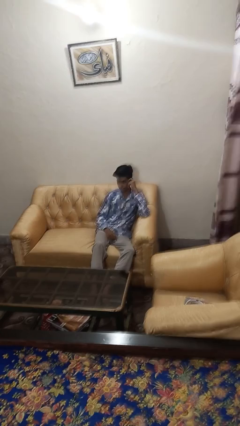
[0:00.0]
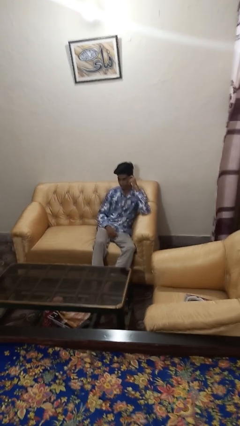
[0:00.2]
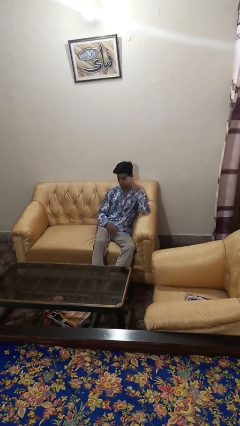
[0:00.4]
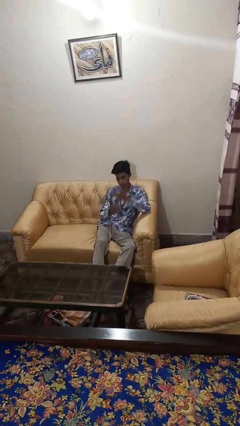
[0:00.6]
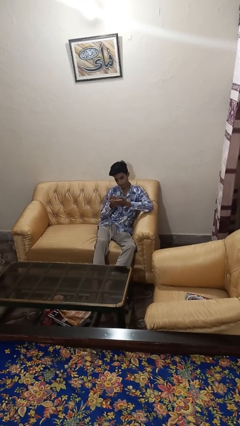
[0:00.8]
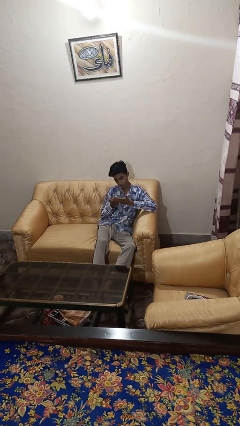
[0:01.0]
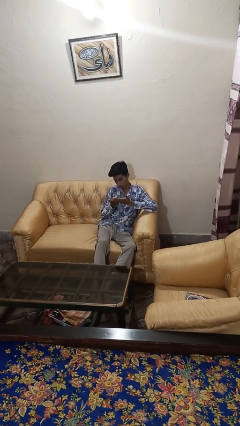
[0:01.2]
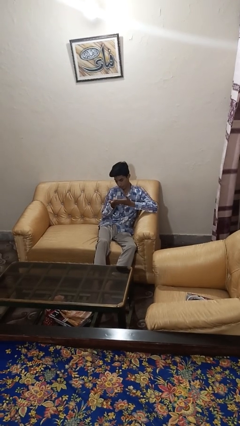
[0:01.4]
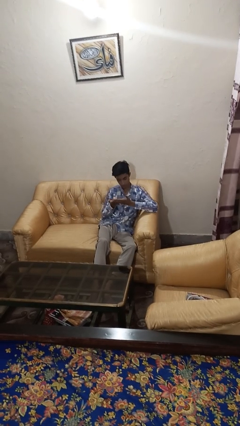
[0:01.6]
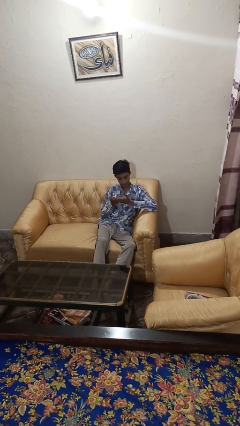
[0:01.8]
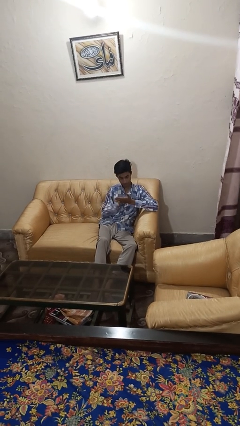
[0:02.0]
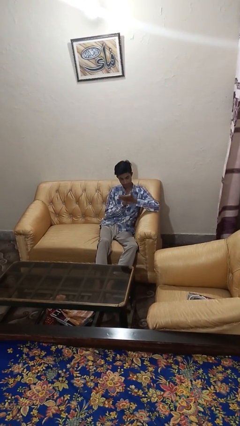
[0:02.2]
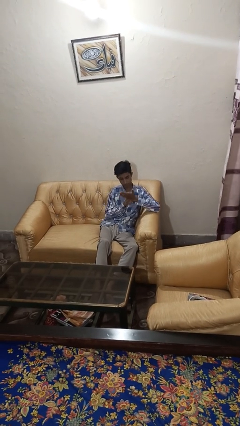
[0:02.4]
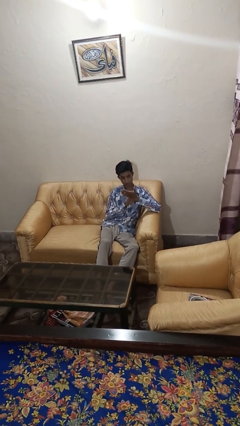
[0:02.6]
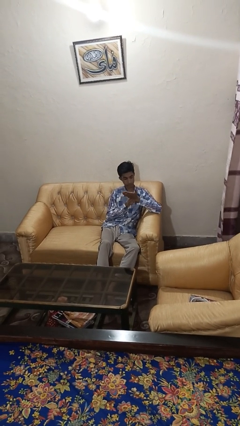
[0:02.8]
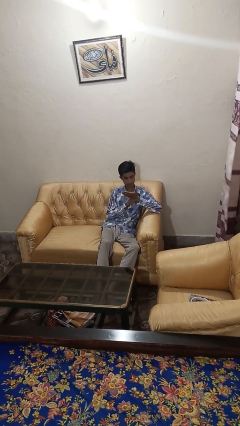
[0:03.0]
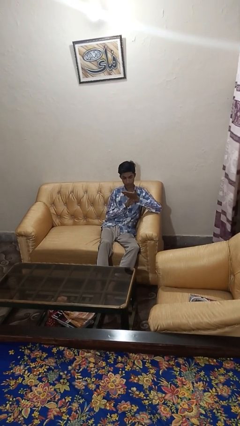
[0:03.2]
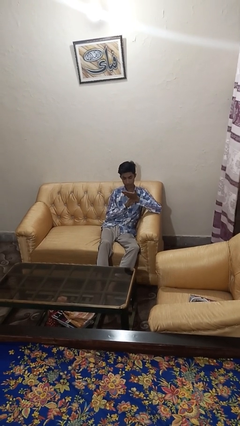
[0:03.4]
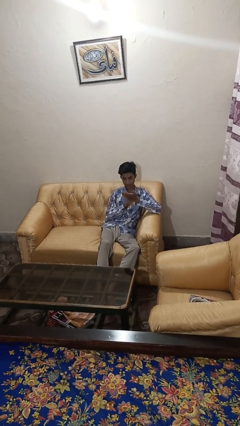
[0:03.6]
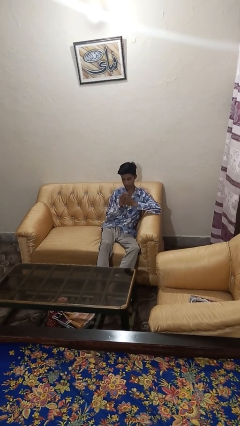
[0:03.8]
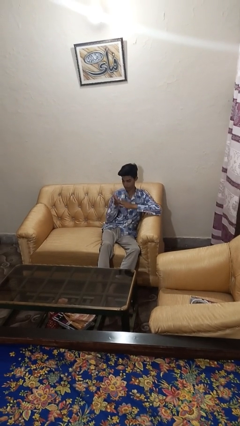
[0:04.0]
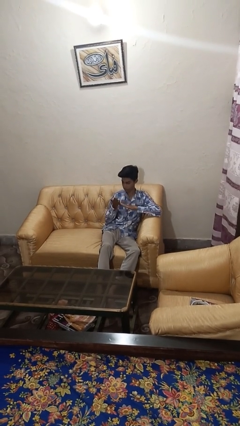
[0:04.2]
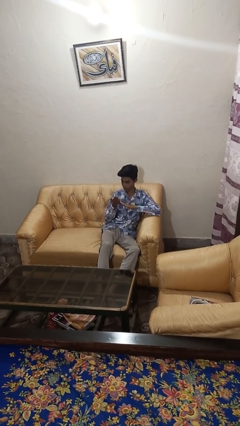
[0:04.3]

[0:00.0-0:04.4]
person looks at hands in lap

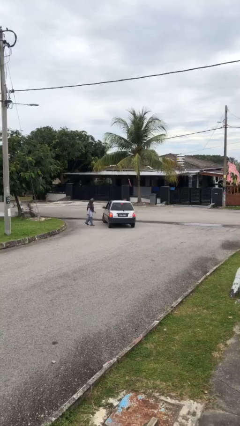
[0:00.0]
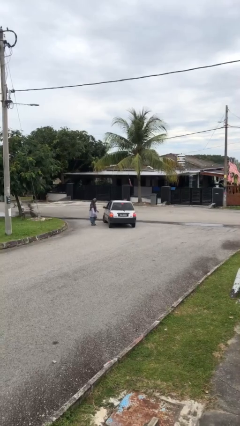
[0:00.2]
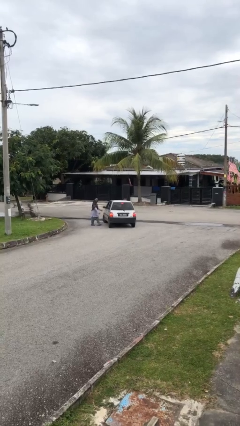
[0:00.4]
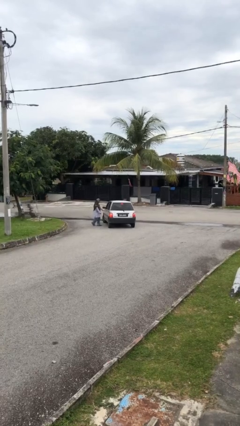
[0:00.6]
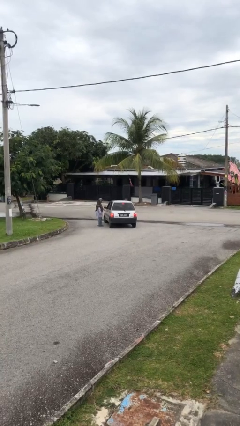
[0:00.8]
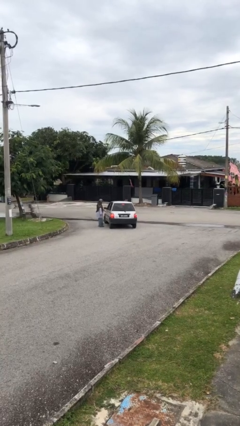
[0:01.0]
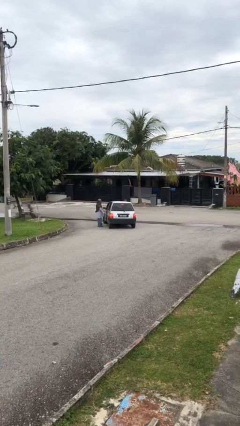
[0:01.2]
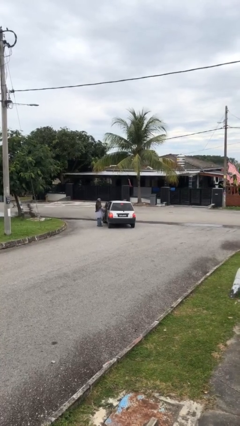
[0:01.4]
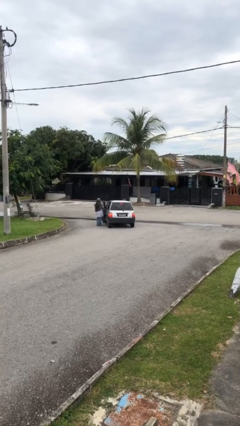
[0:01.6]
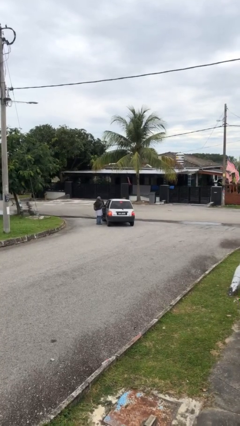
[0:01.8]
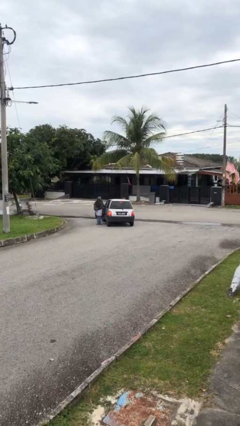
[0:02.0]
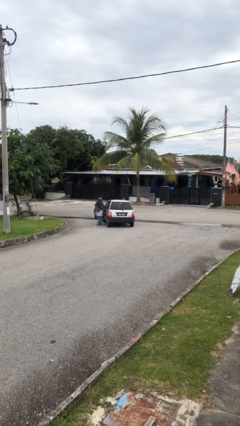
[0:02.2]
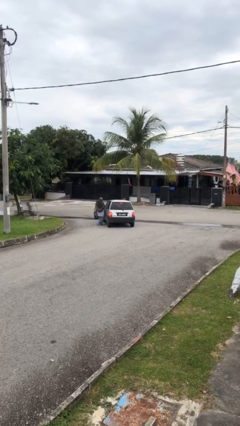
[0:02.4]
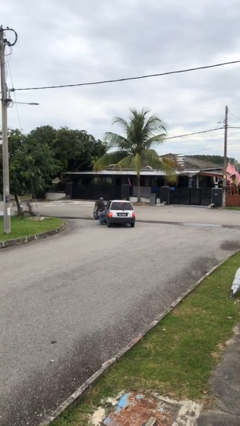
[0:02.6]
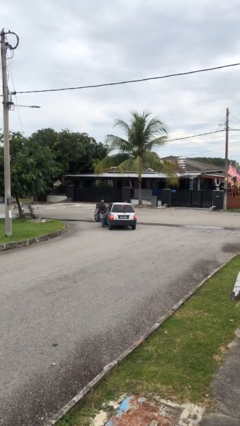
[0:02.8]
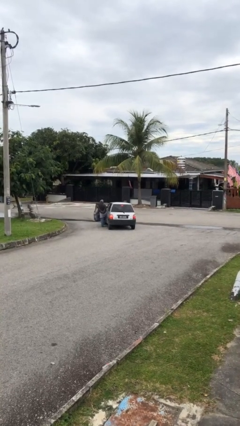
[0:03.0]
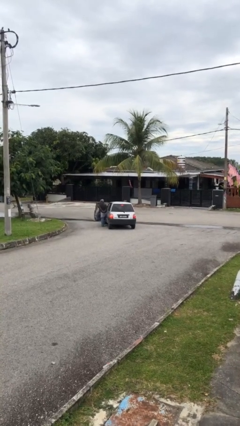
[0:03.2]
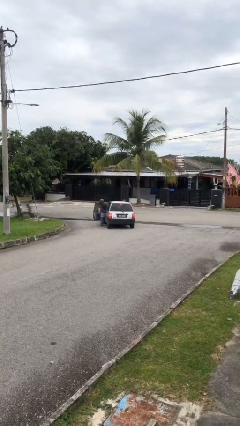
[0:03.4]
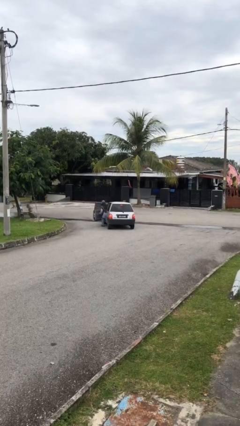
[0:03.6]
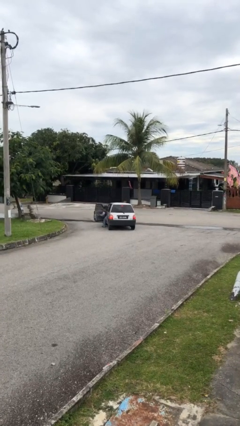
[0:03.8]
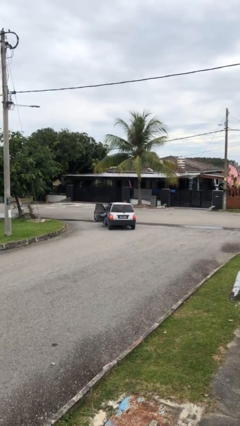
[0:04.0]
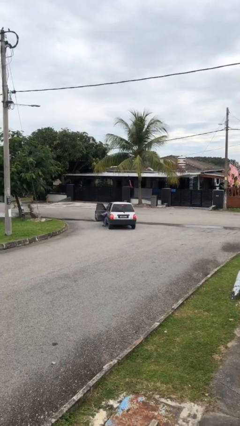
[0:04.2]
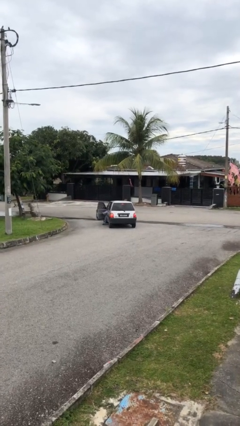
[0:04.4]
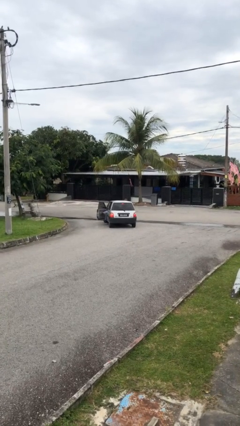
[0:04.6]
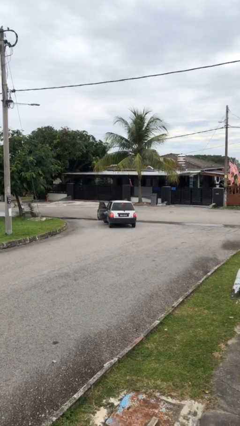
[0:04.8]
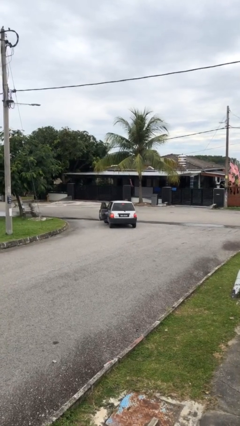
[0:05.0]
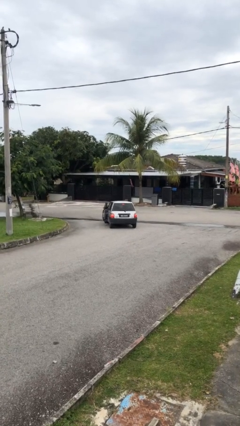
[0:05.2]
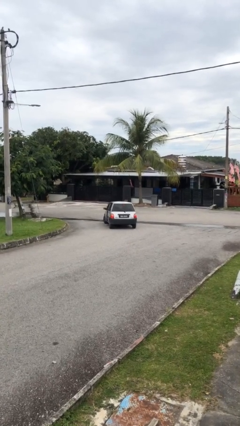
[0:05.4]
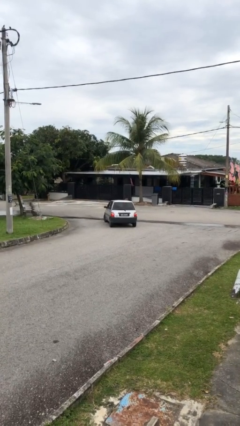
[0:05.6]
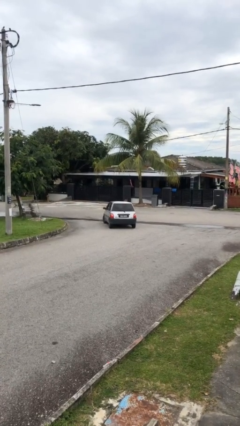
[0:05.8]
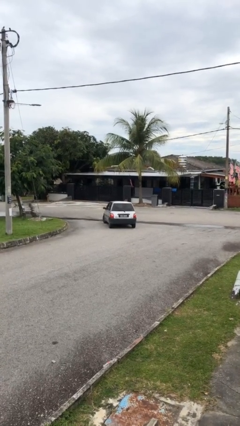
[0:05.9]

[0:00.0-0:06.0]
car picks up person

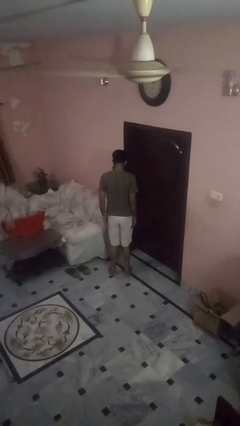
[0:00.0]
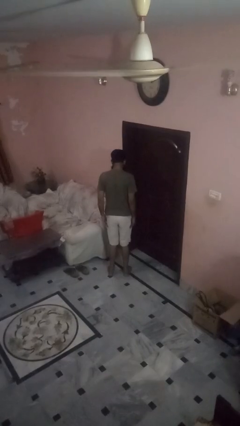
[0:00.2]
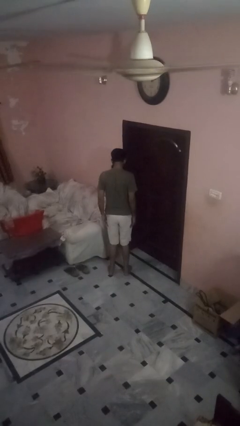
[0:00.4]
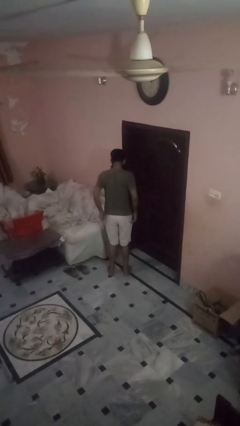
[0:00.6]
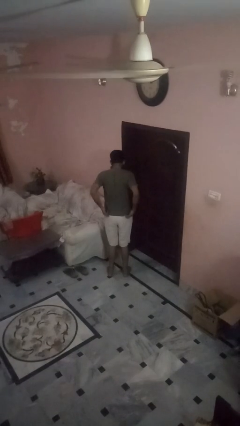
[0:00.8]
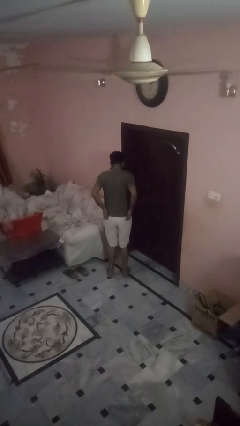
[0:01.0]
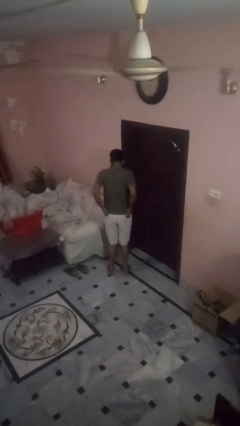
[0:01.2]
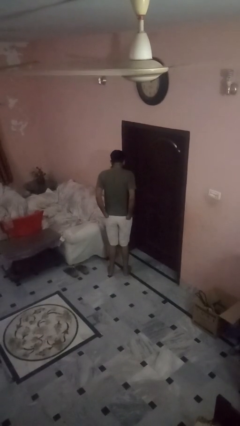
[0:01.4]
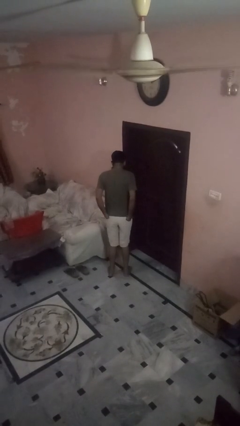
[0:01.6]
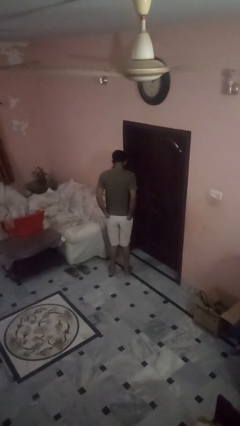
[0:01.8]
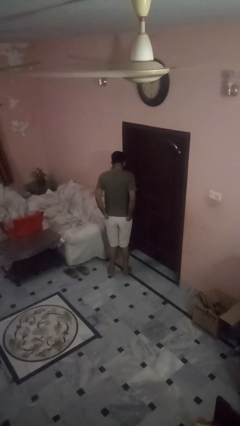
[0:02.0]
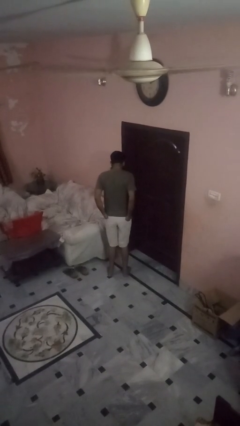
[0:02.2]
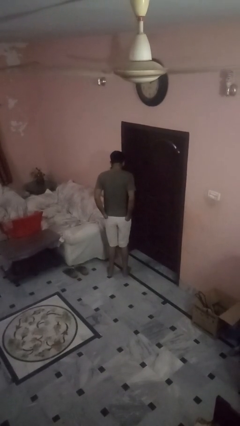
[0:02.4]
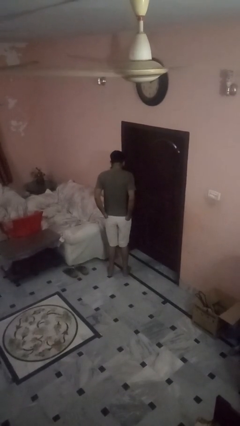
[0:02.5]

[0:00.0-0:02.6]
person puts hands in back pockets

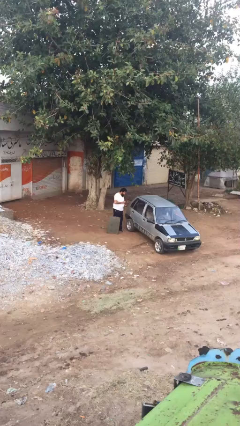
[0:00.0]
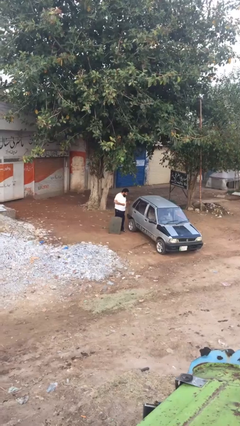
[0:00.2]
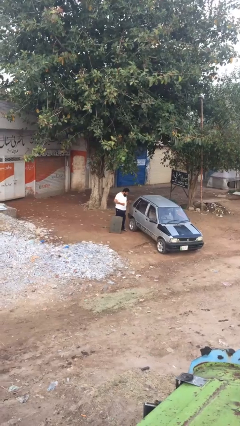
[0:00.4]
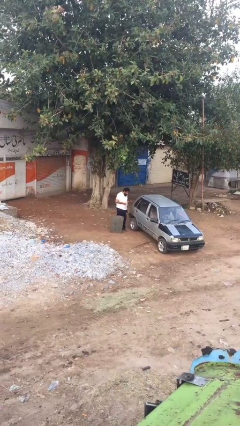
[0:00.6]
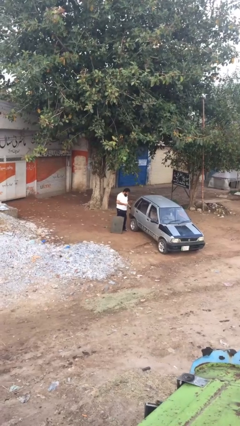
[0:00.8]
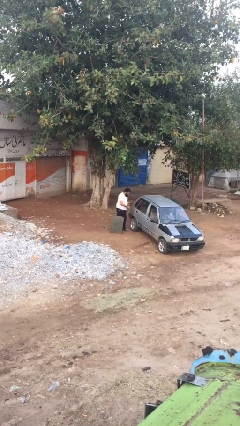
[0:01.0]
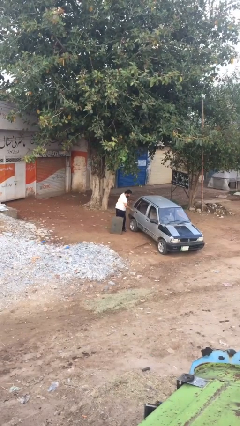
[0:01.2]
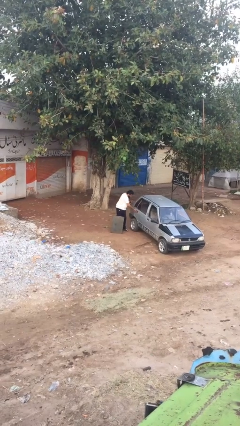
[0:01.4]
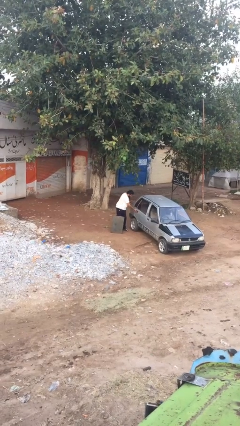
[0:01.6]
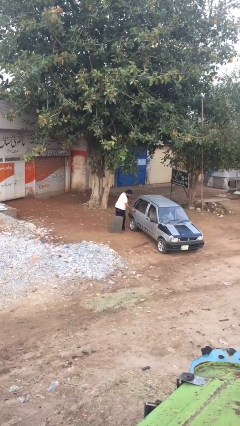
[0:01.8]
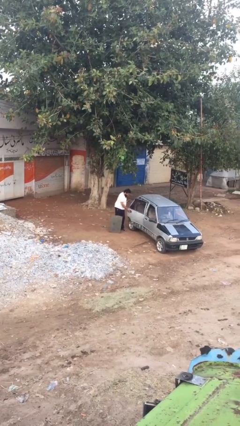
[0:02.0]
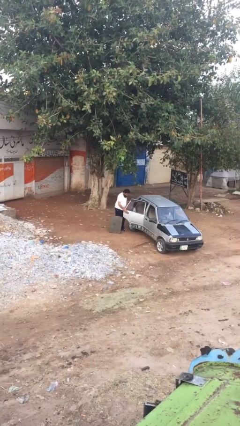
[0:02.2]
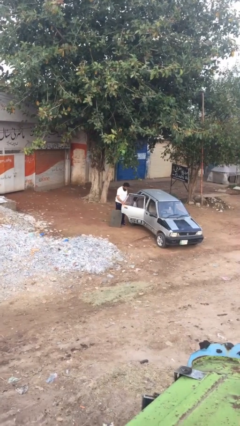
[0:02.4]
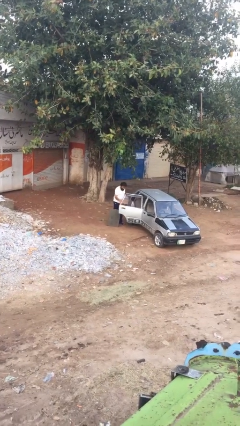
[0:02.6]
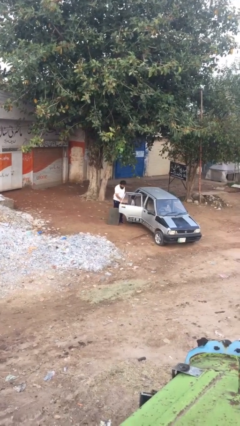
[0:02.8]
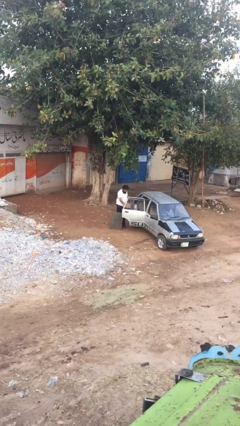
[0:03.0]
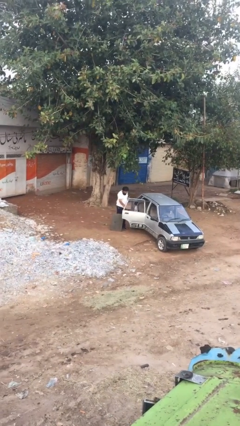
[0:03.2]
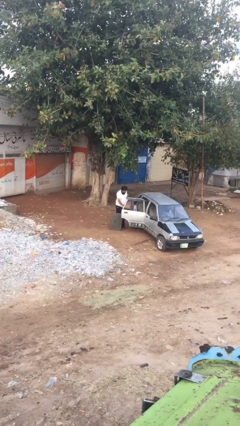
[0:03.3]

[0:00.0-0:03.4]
person opens car door

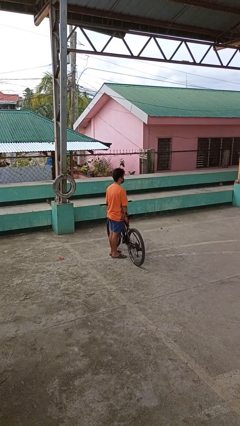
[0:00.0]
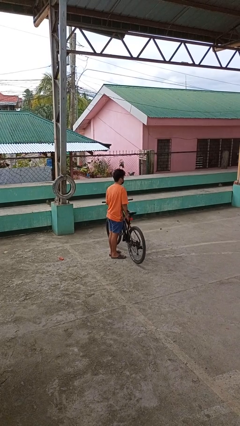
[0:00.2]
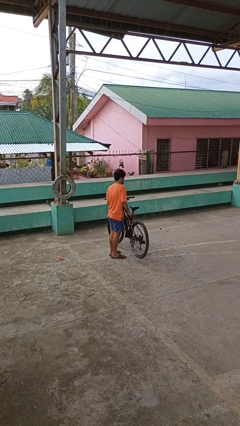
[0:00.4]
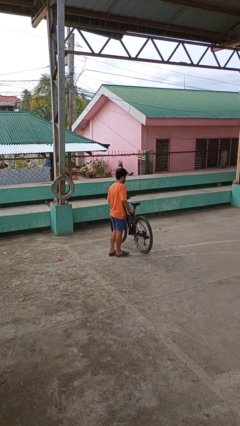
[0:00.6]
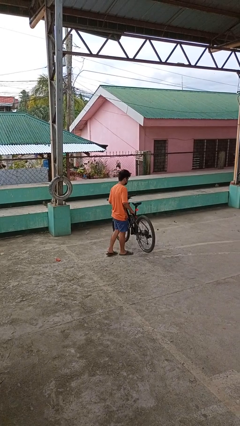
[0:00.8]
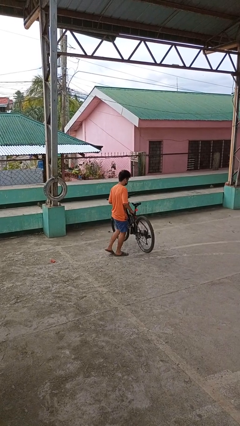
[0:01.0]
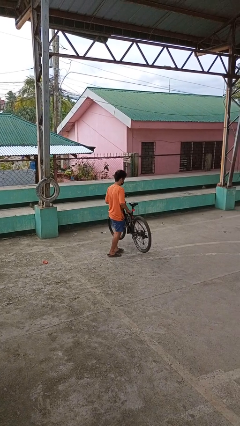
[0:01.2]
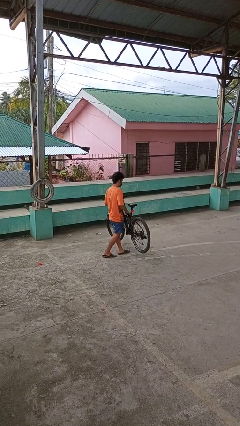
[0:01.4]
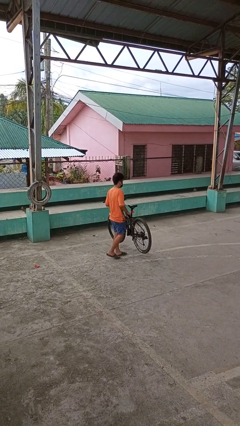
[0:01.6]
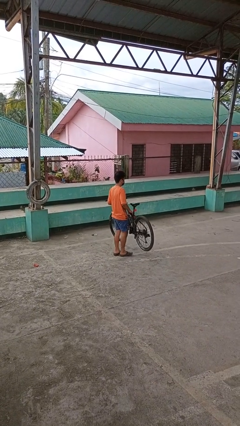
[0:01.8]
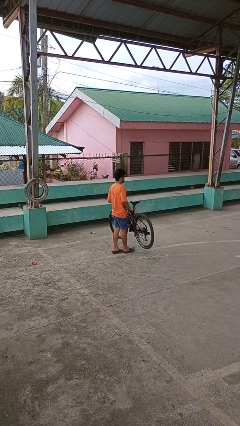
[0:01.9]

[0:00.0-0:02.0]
person carries bicycle
